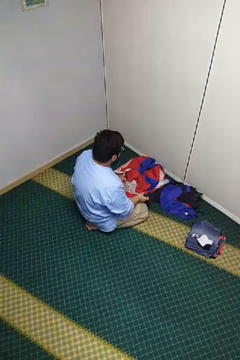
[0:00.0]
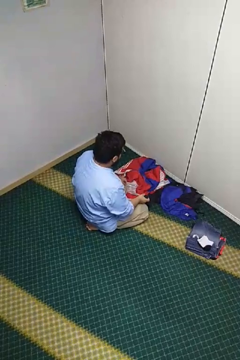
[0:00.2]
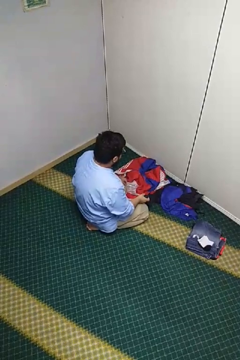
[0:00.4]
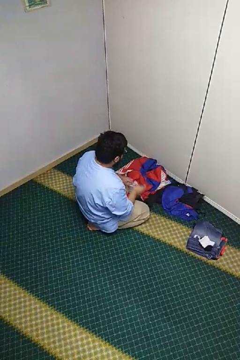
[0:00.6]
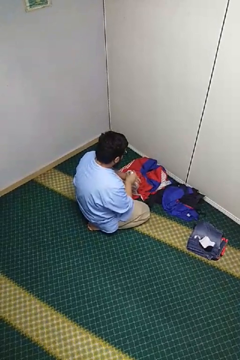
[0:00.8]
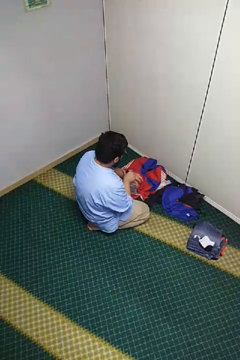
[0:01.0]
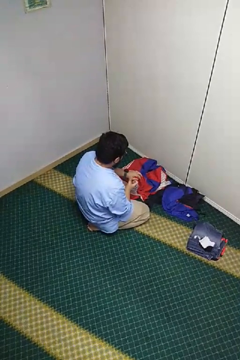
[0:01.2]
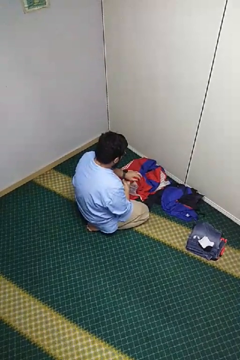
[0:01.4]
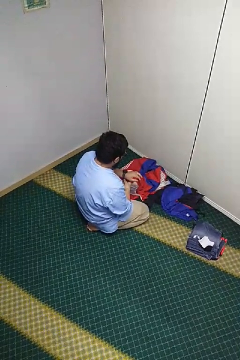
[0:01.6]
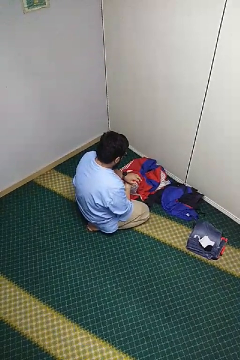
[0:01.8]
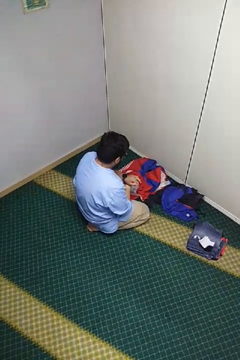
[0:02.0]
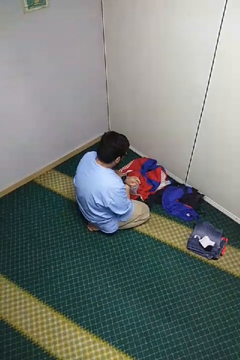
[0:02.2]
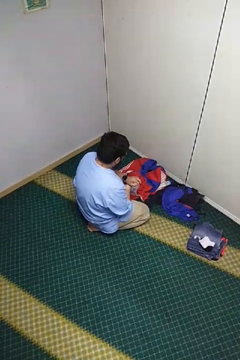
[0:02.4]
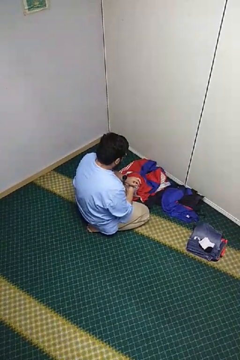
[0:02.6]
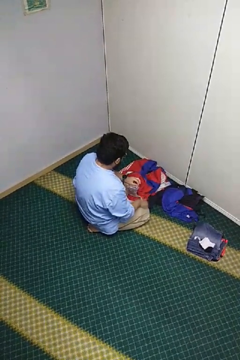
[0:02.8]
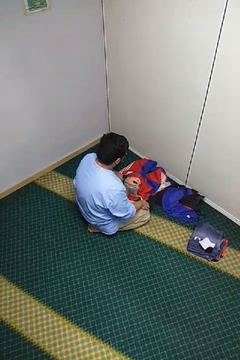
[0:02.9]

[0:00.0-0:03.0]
person puts on wristwatch

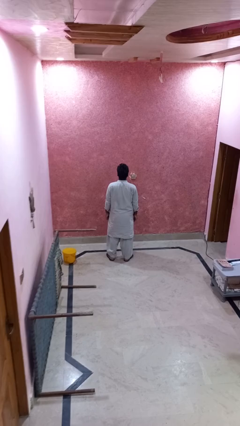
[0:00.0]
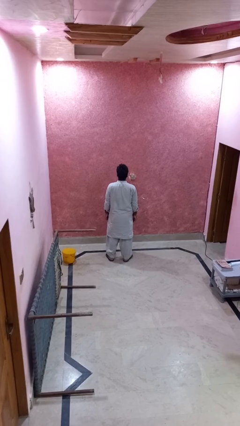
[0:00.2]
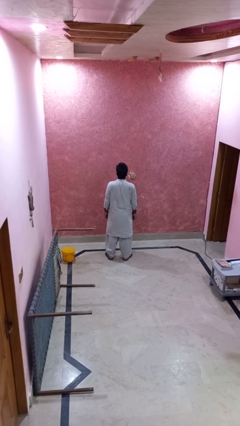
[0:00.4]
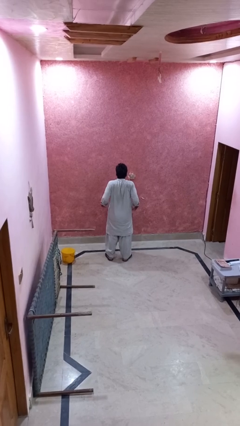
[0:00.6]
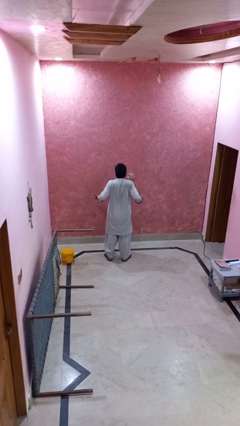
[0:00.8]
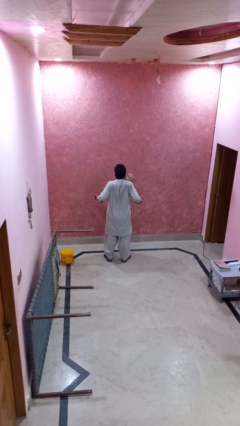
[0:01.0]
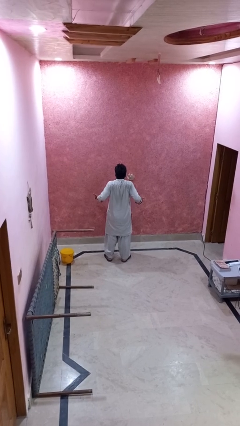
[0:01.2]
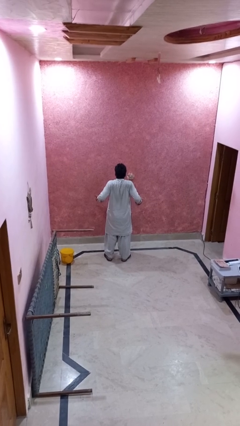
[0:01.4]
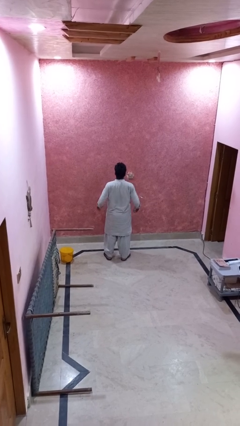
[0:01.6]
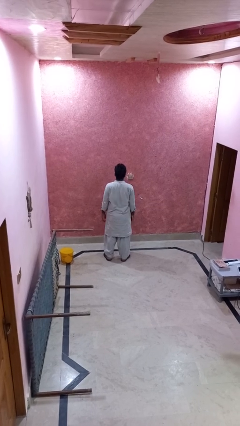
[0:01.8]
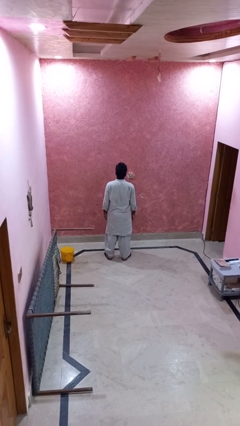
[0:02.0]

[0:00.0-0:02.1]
person shrugs

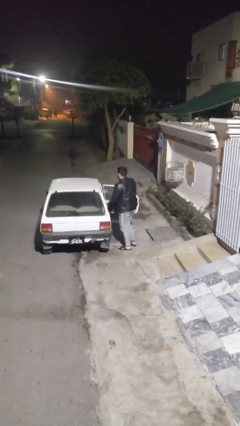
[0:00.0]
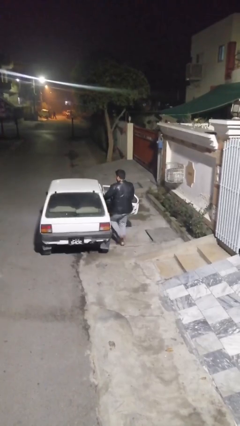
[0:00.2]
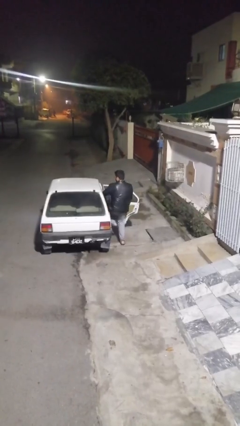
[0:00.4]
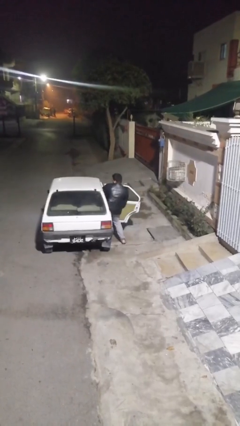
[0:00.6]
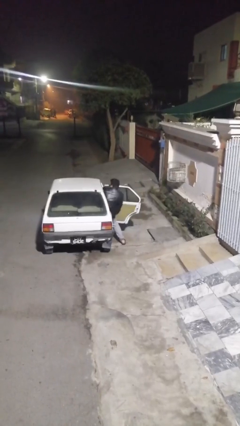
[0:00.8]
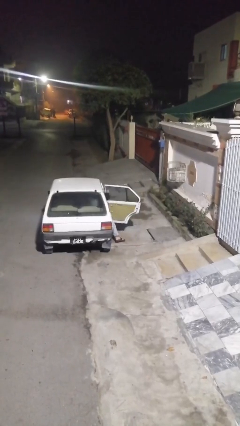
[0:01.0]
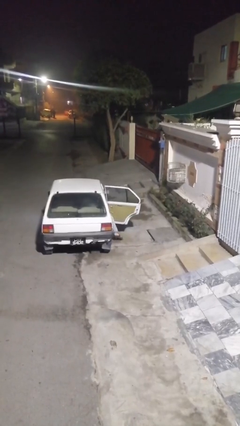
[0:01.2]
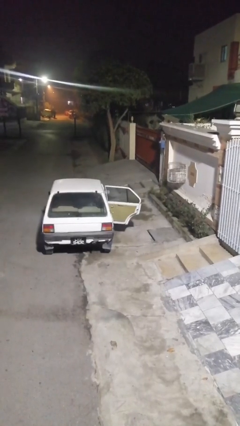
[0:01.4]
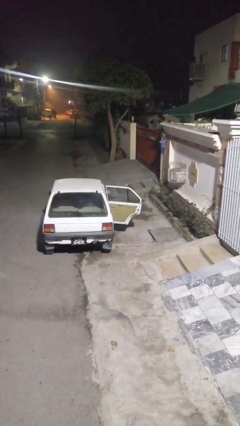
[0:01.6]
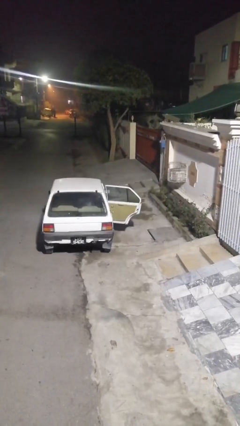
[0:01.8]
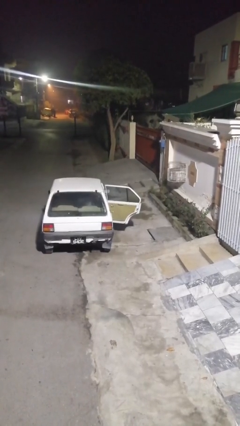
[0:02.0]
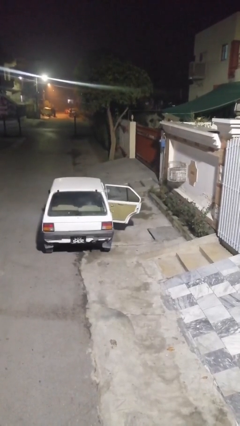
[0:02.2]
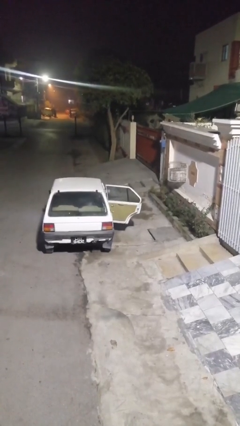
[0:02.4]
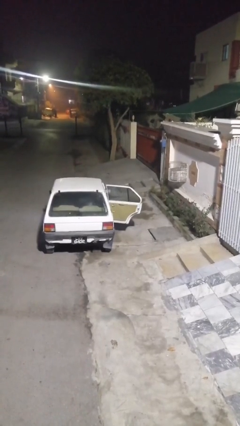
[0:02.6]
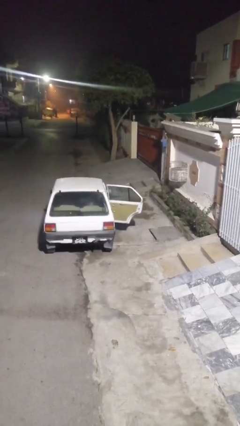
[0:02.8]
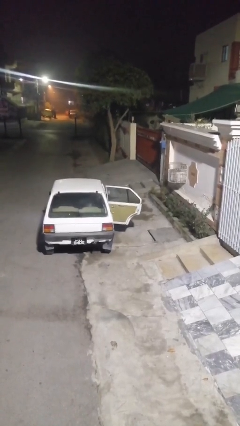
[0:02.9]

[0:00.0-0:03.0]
person enters car

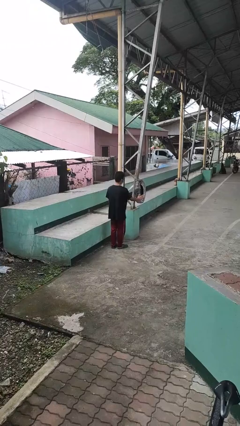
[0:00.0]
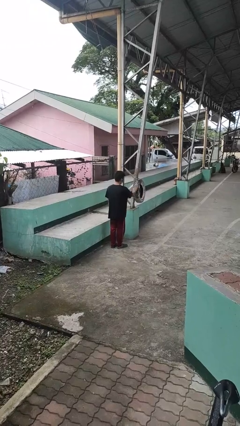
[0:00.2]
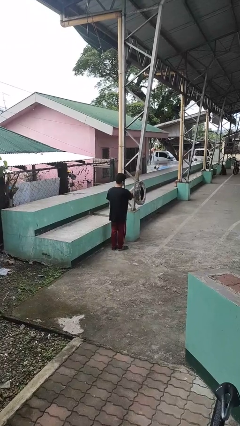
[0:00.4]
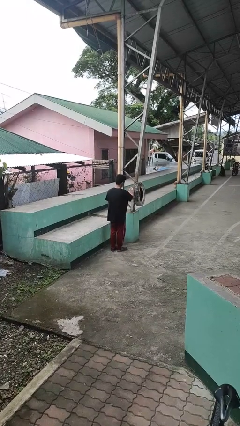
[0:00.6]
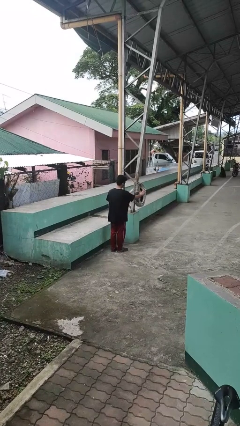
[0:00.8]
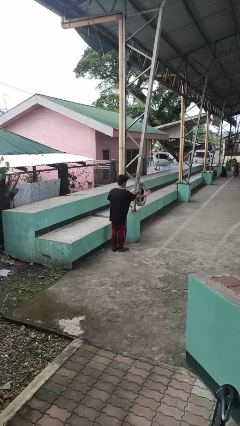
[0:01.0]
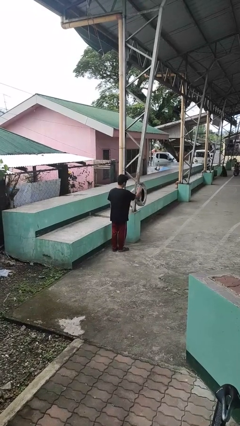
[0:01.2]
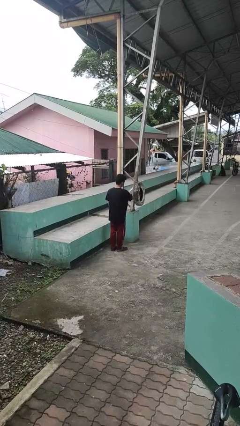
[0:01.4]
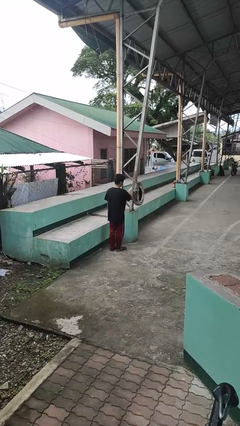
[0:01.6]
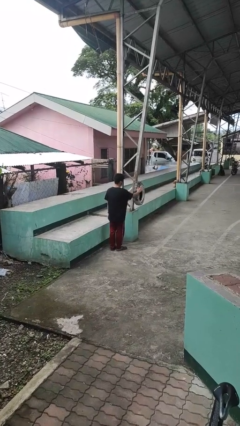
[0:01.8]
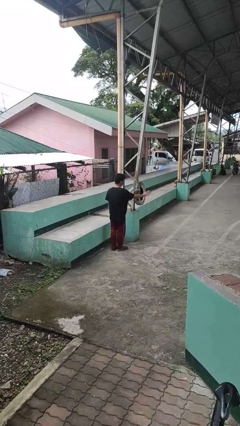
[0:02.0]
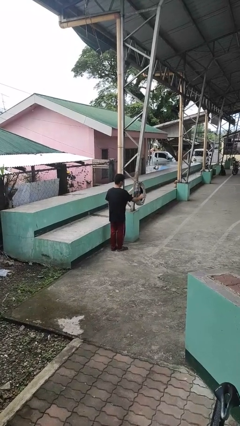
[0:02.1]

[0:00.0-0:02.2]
person waves hand over object

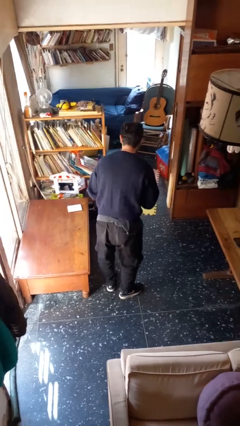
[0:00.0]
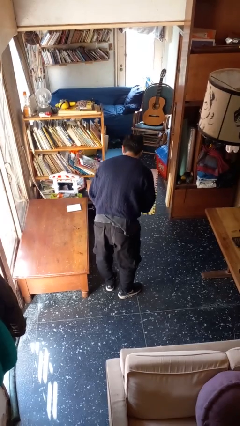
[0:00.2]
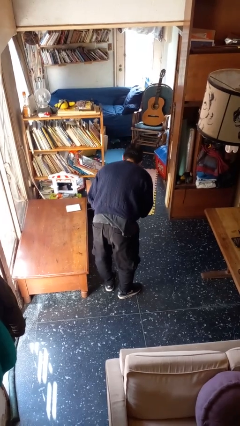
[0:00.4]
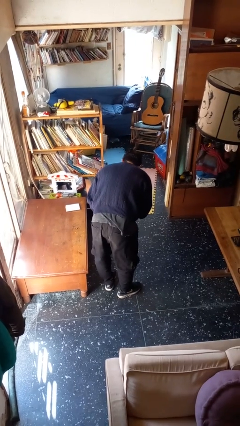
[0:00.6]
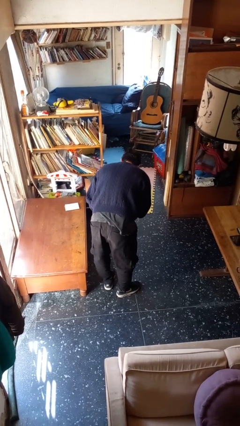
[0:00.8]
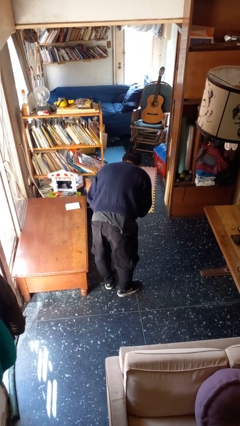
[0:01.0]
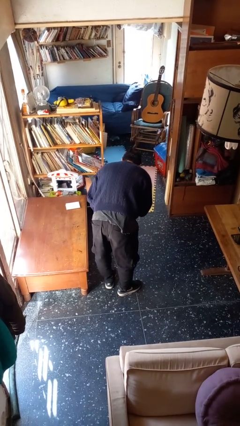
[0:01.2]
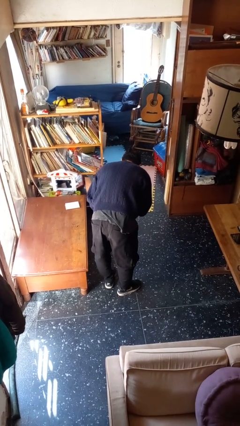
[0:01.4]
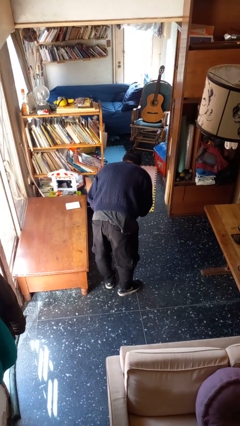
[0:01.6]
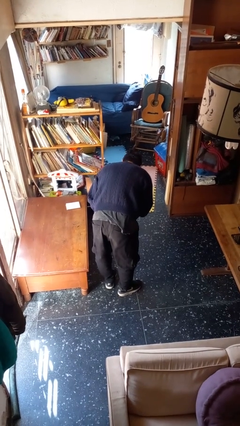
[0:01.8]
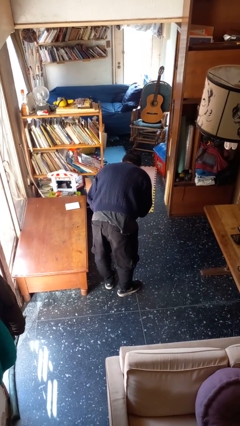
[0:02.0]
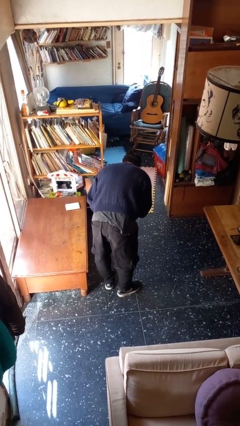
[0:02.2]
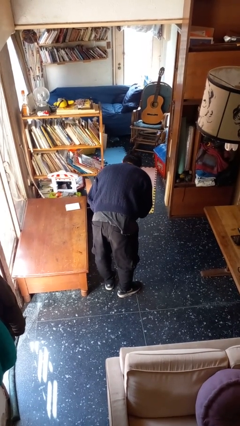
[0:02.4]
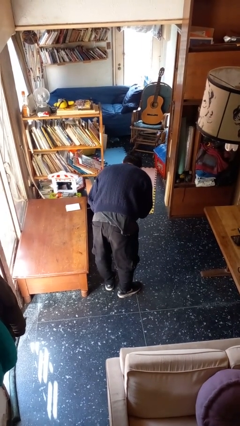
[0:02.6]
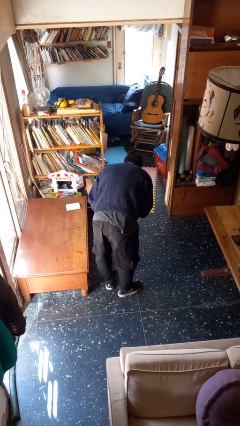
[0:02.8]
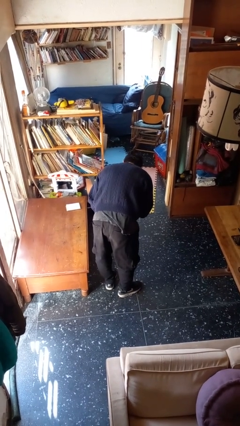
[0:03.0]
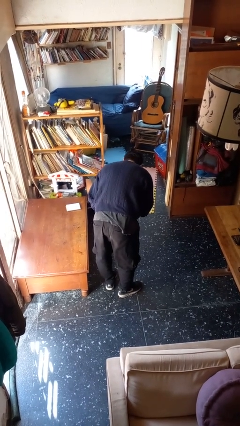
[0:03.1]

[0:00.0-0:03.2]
person bows

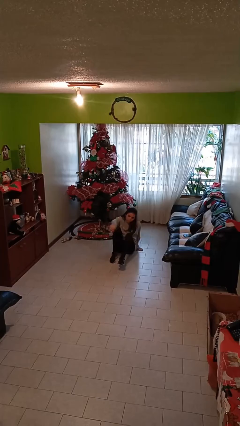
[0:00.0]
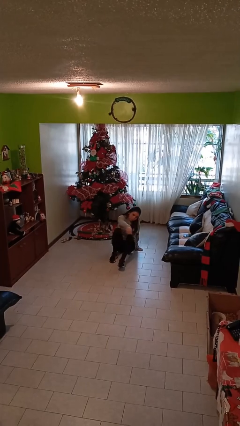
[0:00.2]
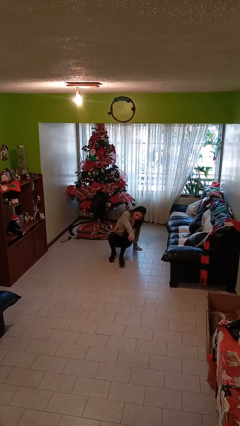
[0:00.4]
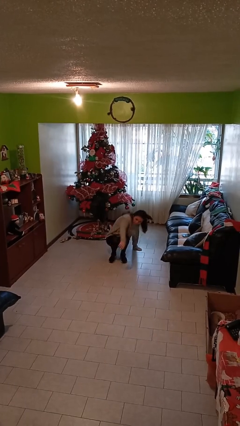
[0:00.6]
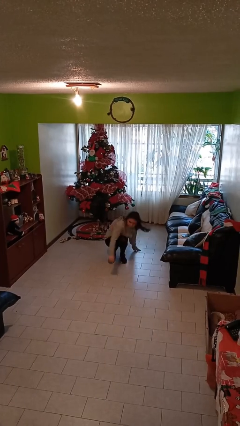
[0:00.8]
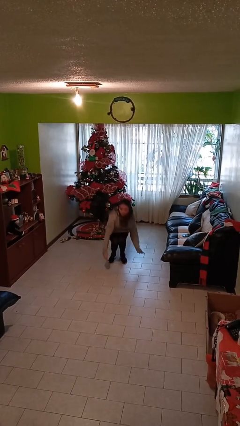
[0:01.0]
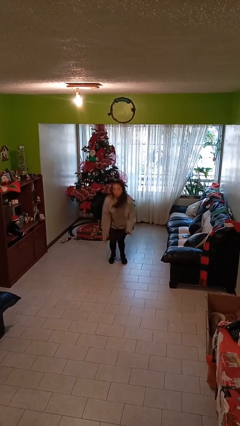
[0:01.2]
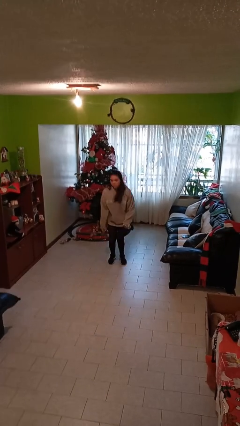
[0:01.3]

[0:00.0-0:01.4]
person stands up

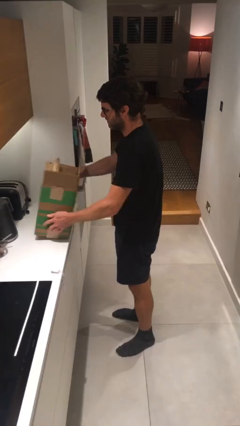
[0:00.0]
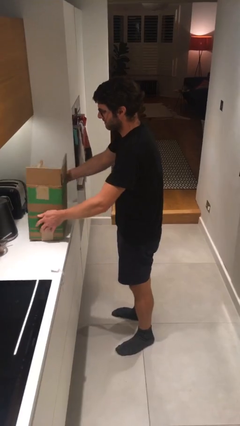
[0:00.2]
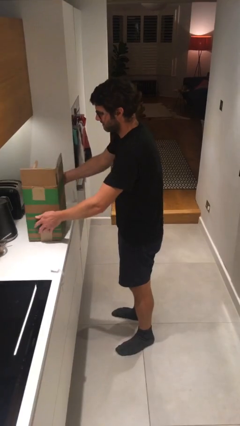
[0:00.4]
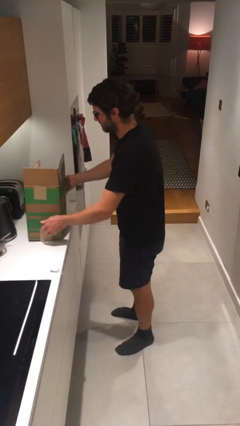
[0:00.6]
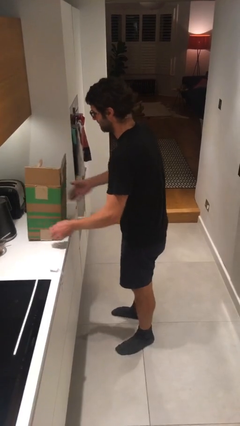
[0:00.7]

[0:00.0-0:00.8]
person puts down object on table

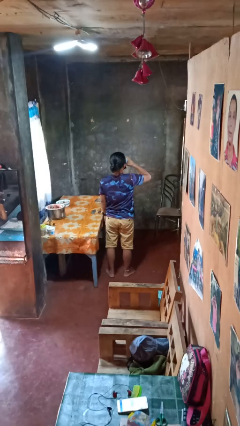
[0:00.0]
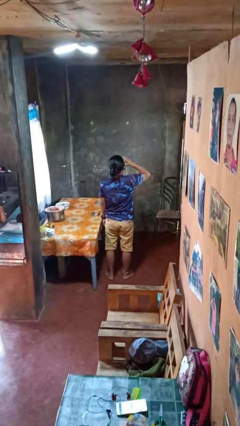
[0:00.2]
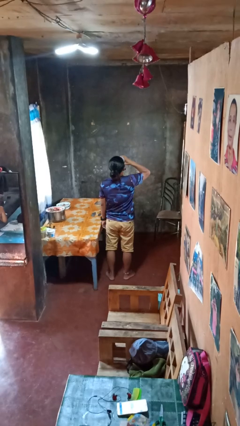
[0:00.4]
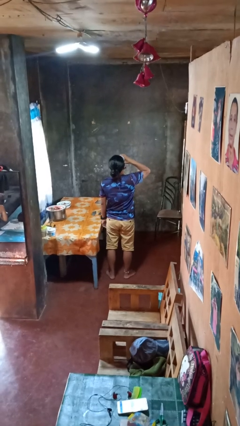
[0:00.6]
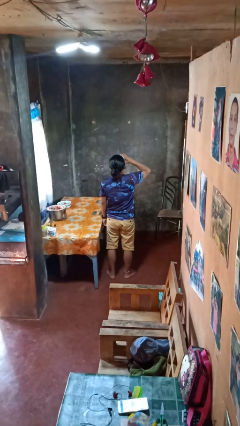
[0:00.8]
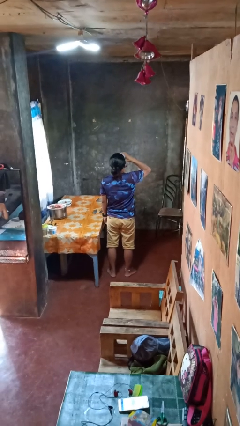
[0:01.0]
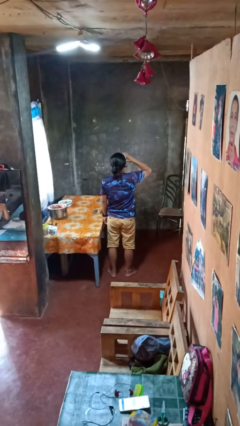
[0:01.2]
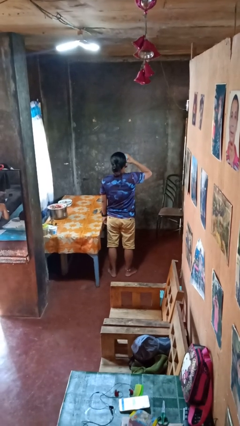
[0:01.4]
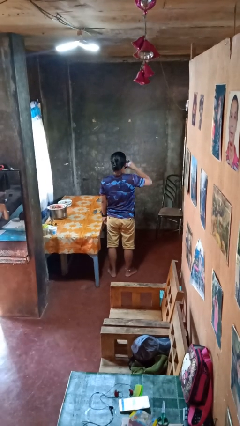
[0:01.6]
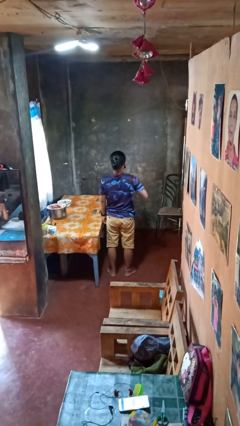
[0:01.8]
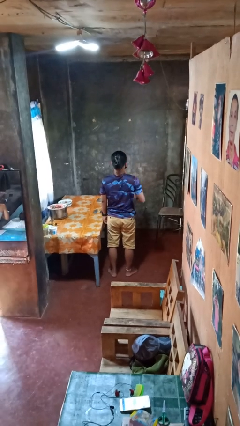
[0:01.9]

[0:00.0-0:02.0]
person drinks from beverage can
